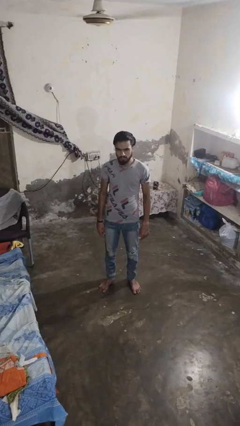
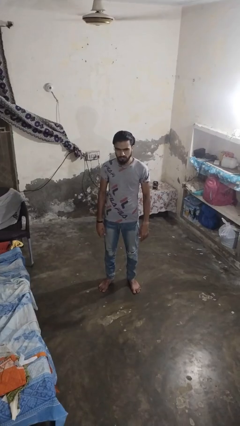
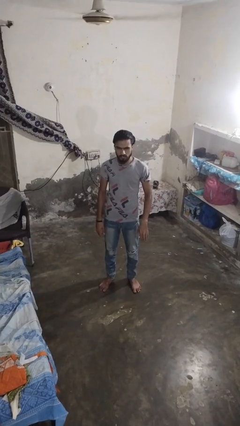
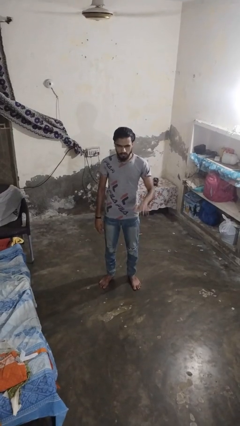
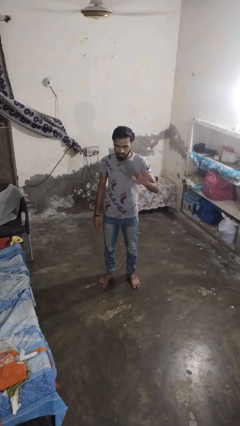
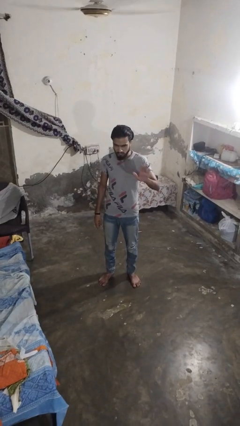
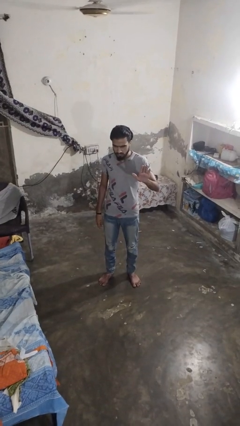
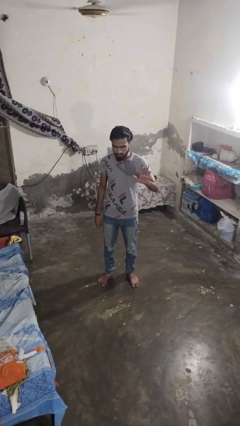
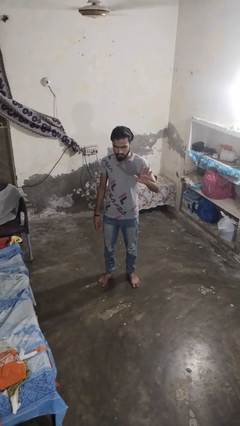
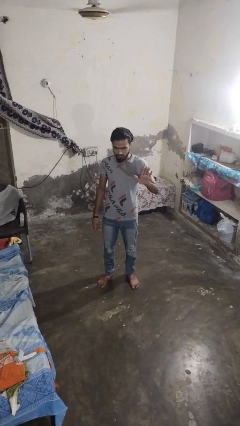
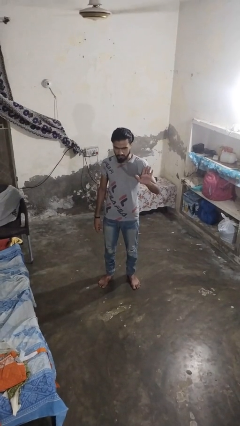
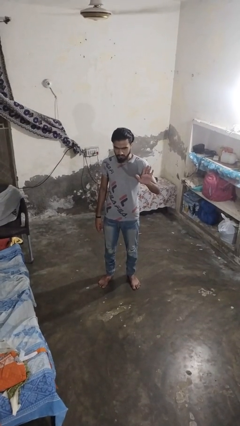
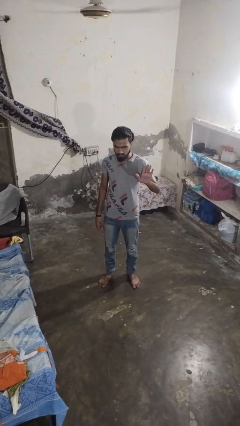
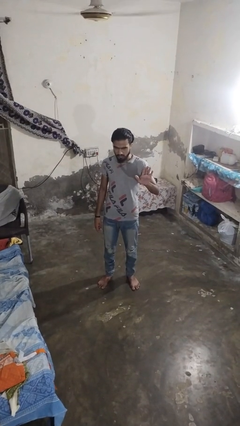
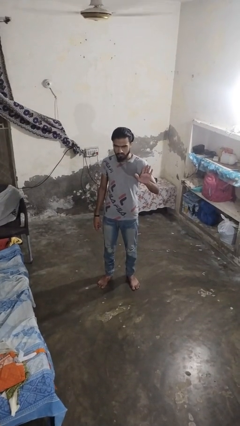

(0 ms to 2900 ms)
person gestures stop

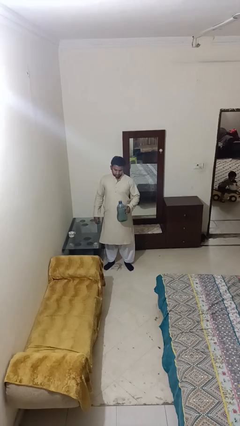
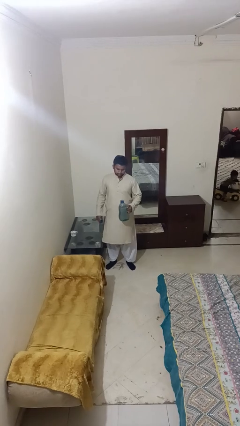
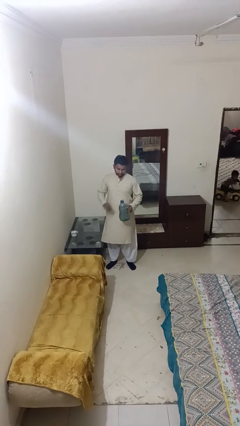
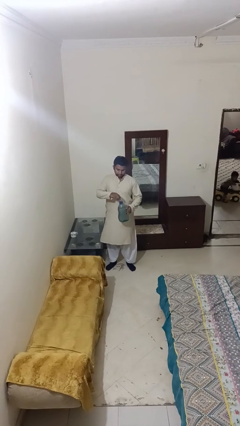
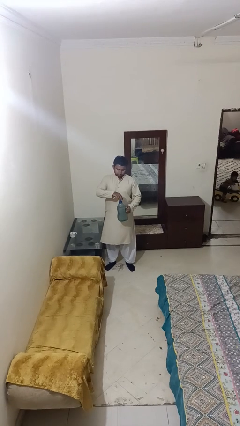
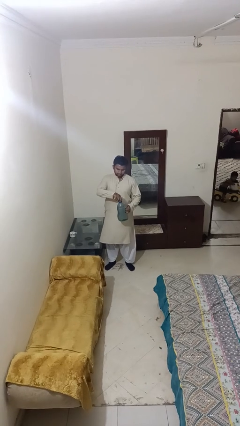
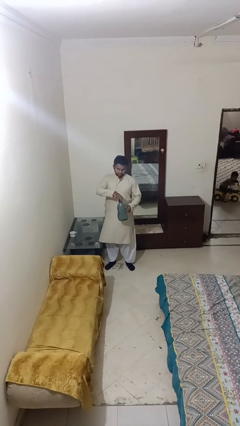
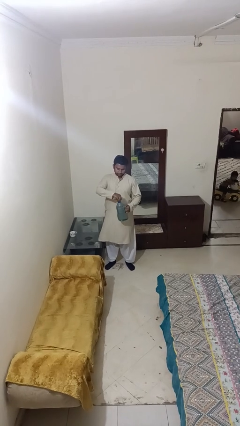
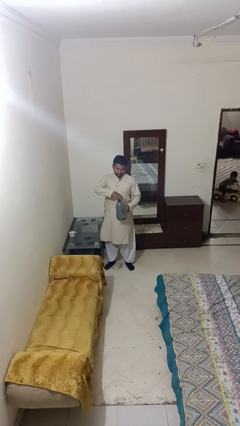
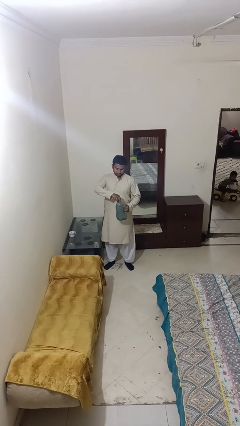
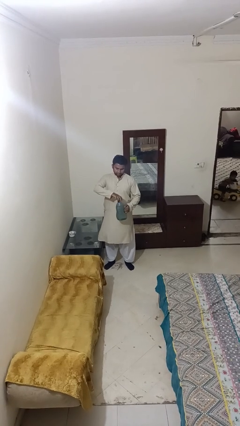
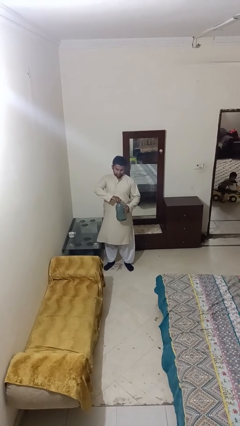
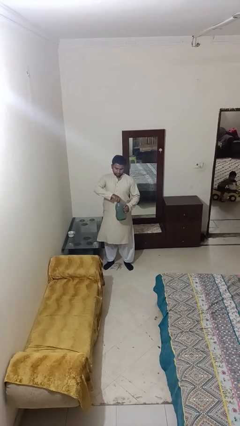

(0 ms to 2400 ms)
person screws lid to bottle

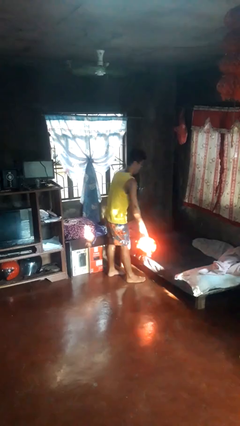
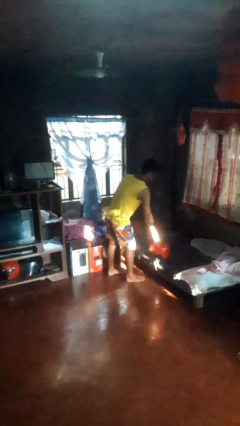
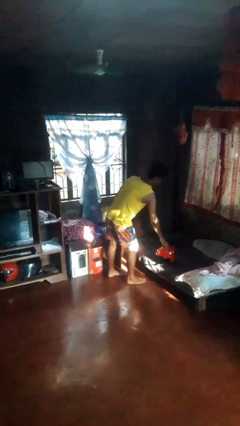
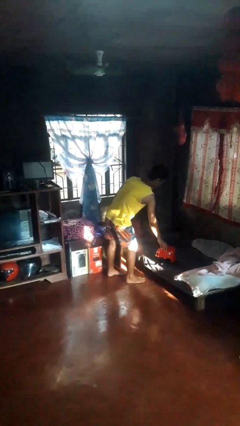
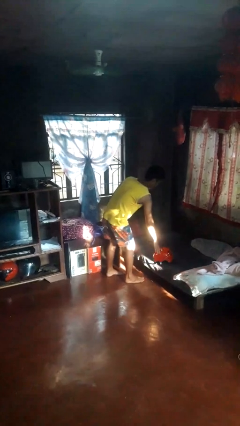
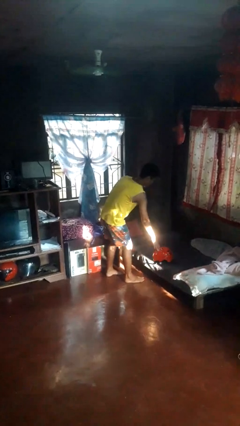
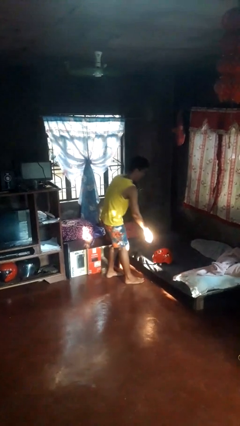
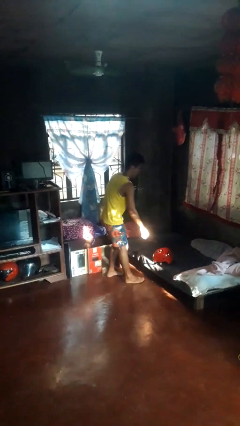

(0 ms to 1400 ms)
person puts down object on bed

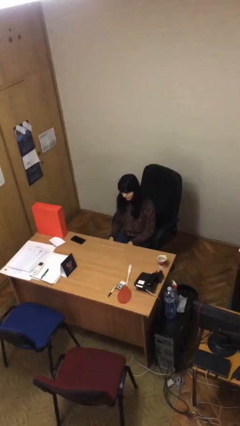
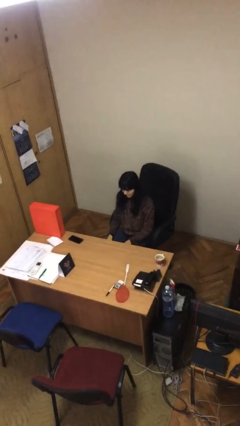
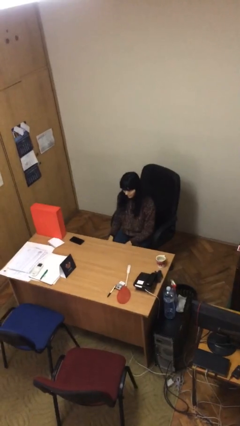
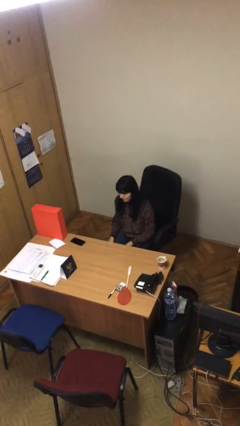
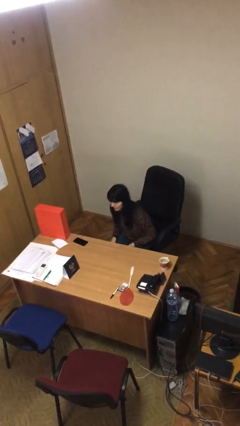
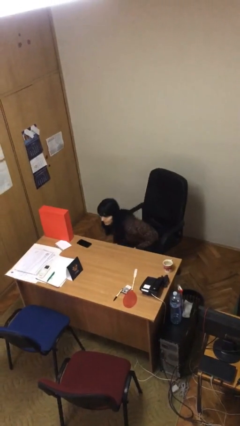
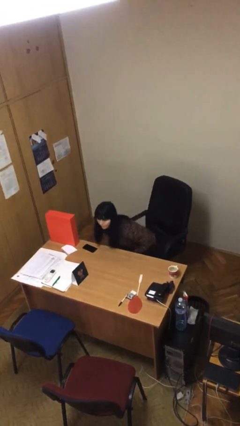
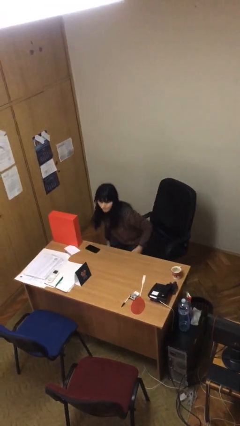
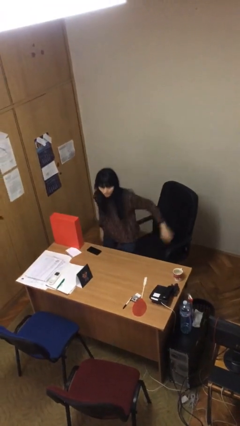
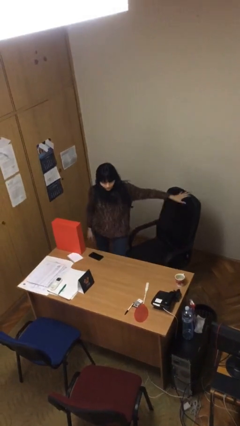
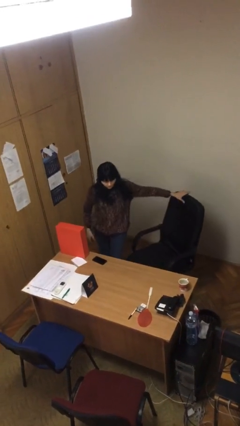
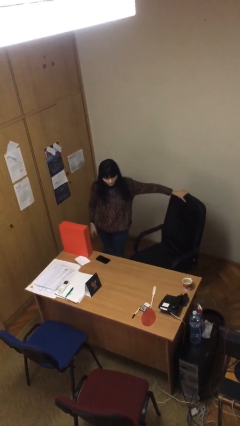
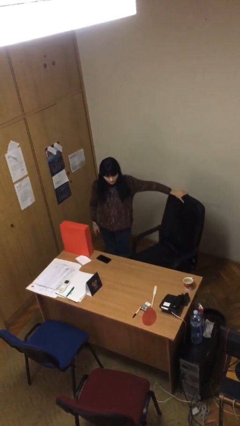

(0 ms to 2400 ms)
person stands up

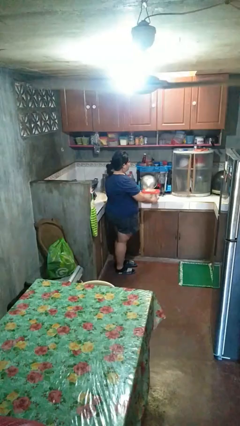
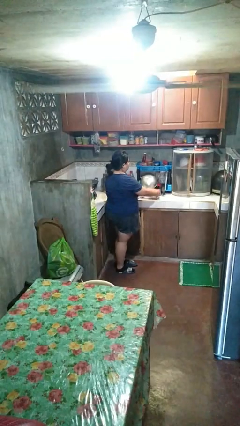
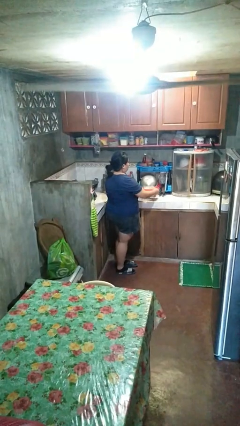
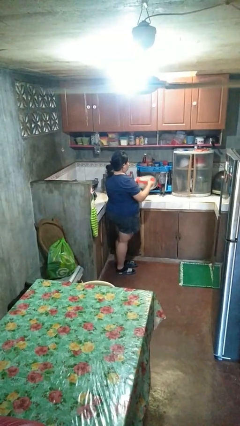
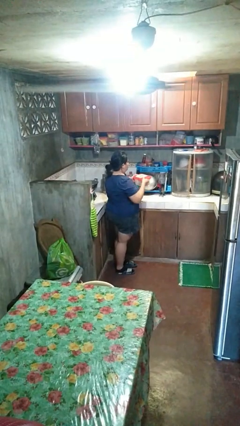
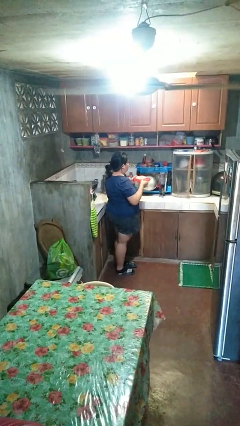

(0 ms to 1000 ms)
person picks up object from countertop

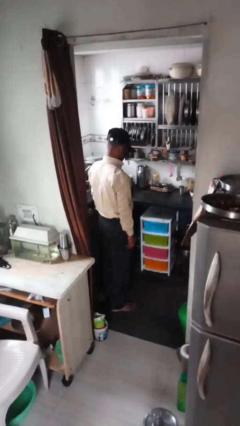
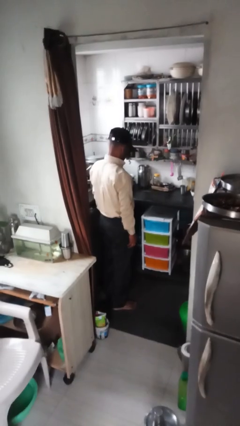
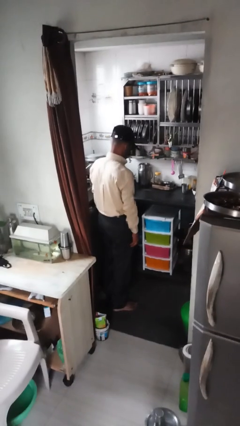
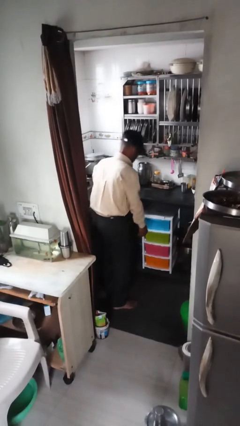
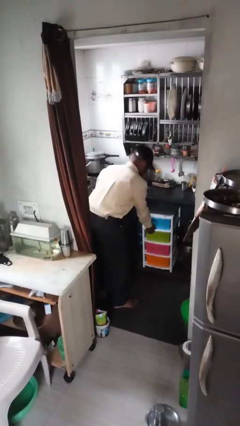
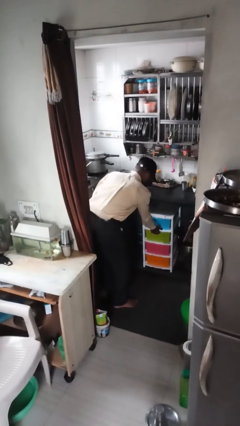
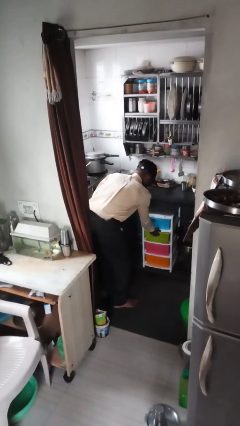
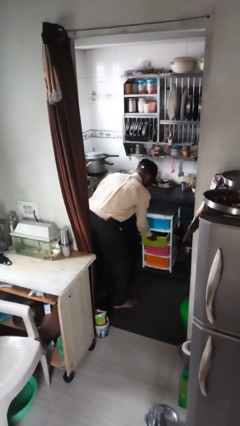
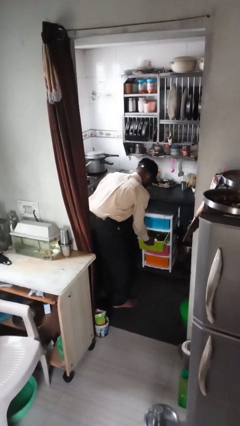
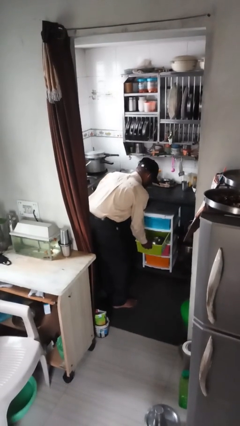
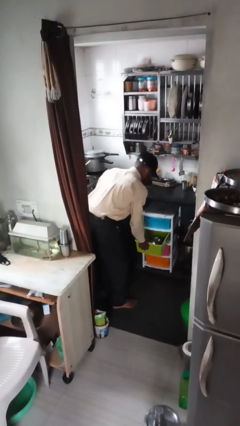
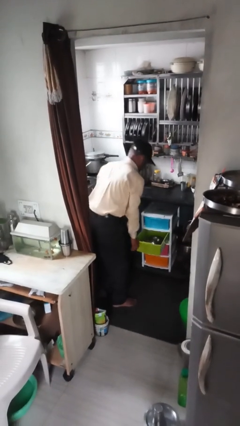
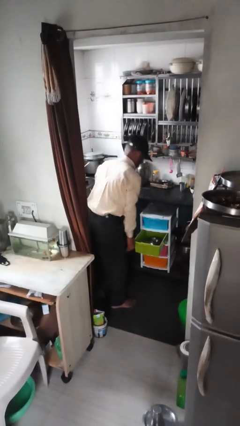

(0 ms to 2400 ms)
person opens kitchen drawer

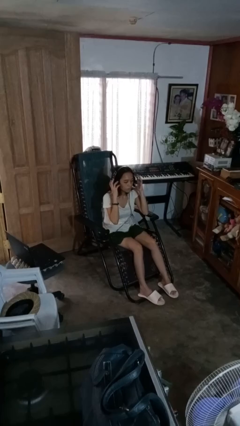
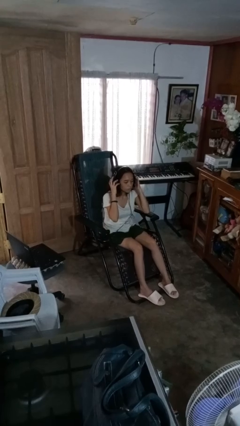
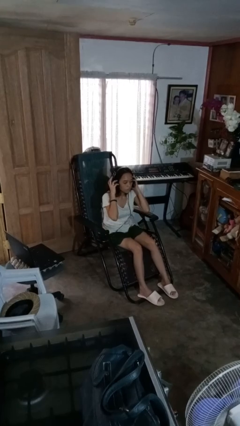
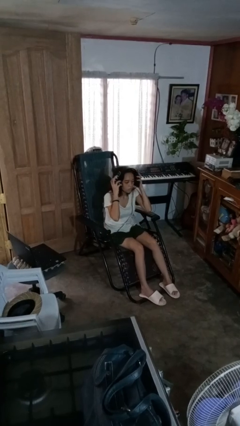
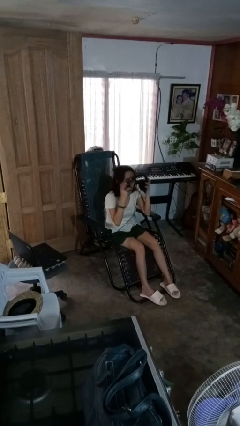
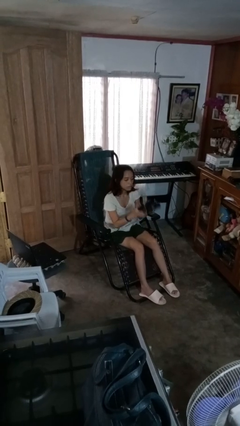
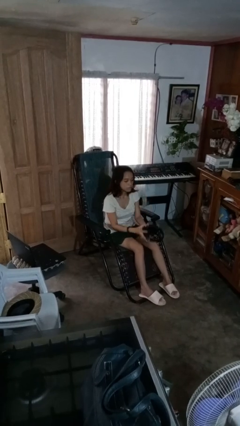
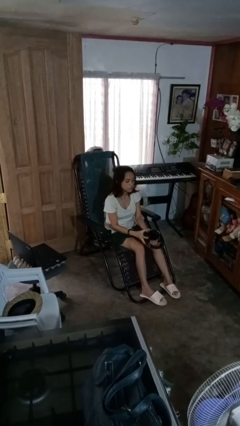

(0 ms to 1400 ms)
person takes off headphones

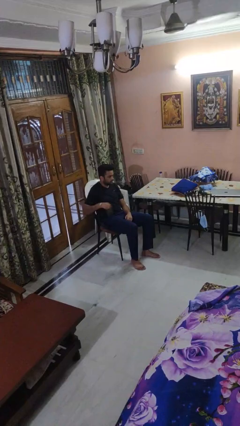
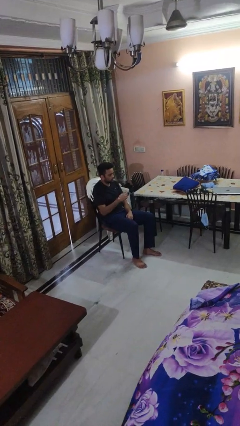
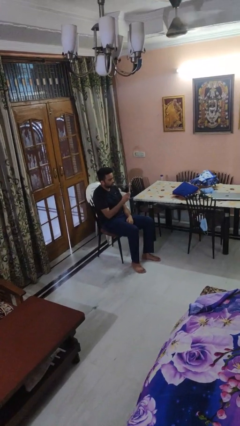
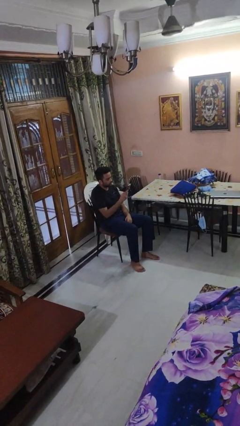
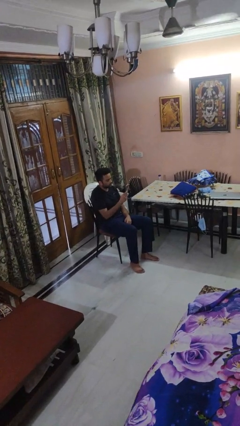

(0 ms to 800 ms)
person takes phone from pocket

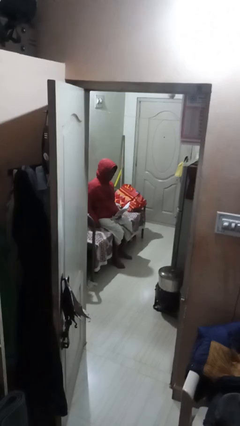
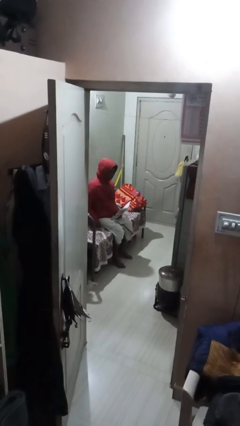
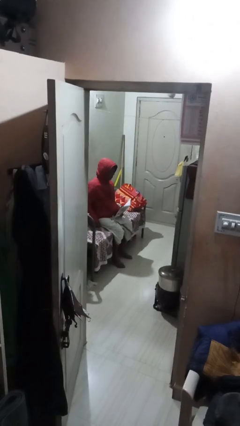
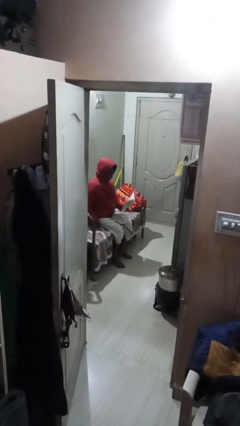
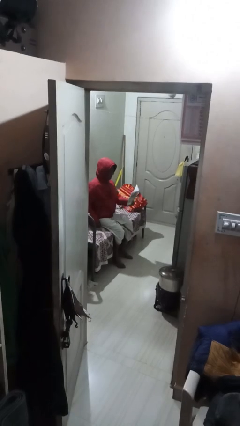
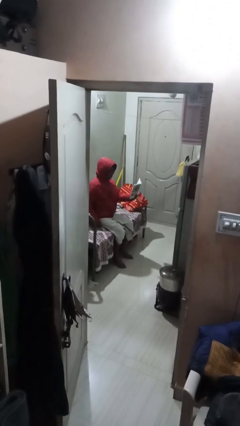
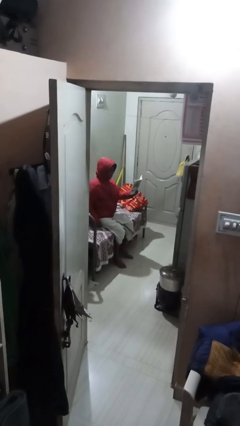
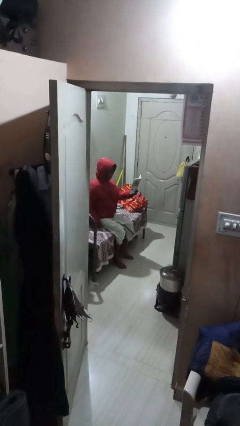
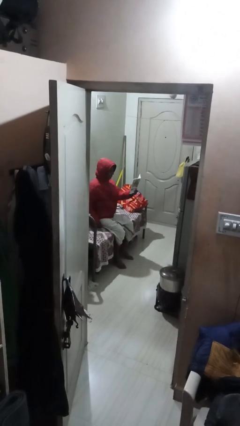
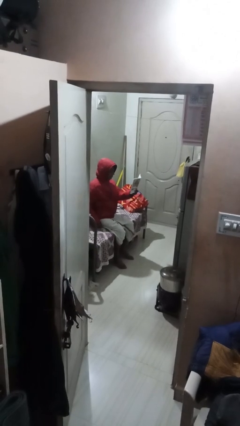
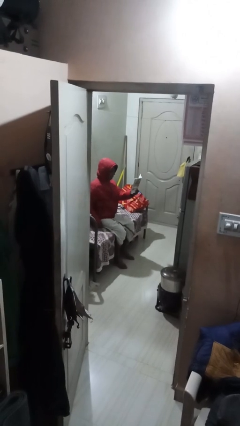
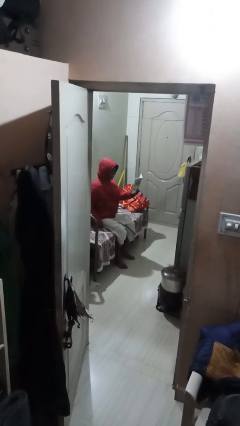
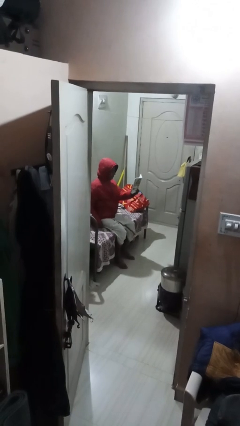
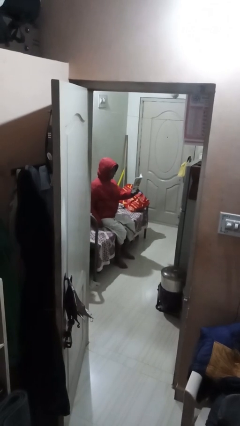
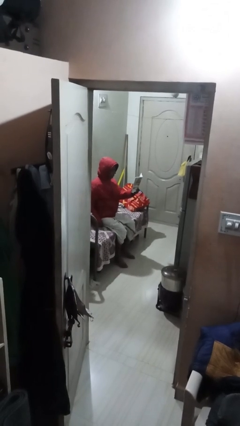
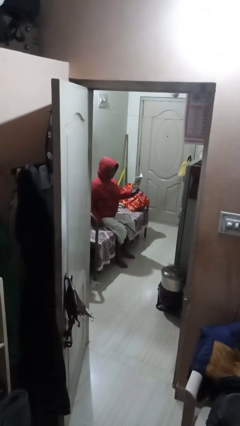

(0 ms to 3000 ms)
person reads document
